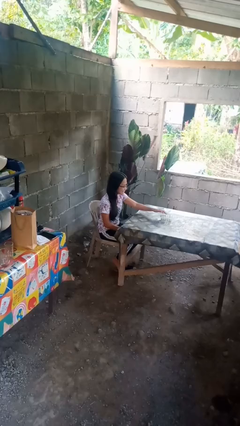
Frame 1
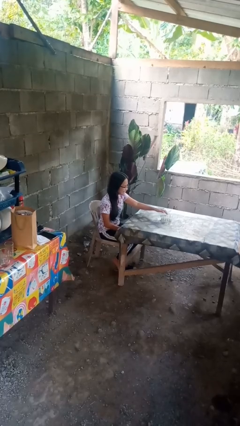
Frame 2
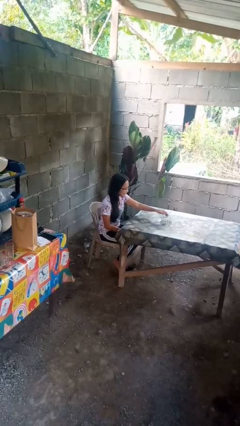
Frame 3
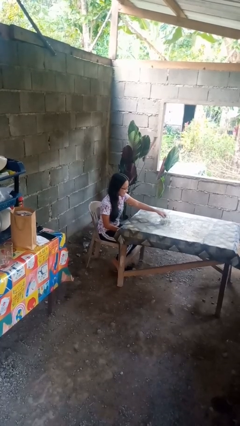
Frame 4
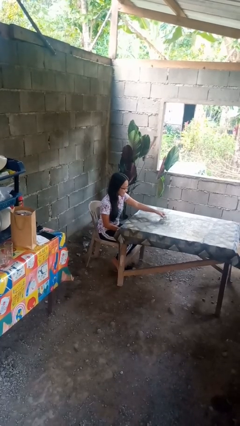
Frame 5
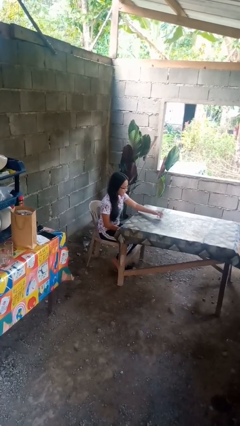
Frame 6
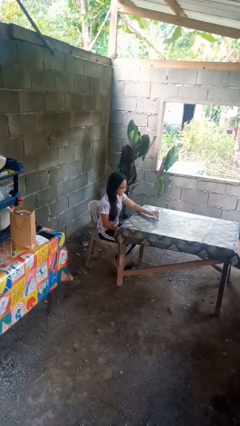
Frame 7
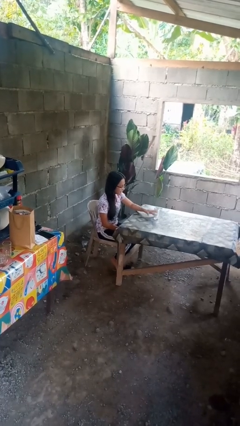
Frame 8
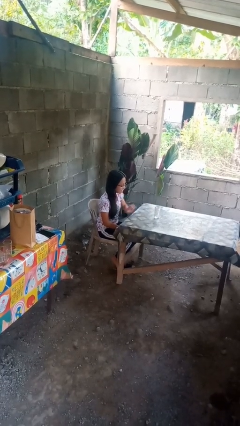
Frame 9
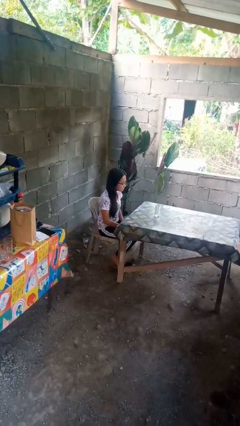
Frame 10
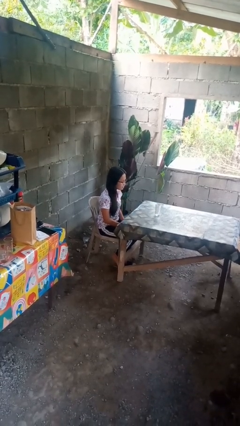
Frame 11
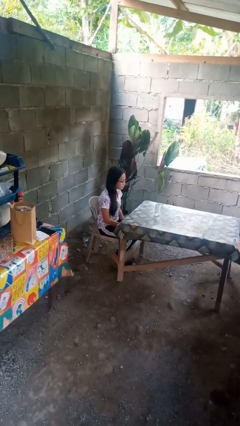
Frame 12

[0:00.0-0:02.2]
person sets upright glass

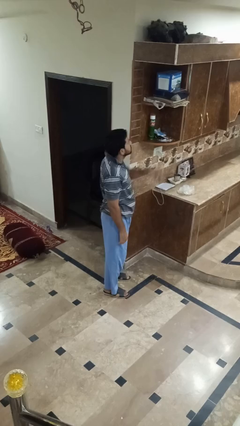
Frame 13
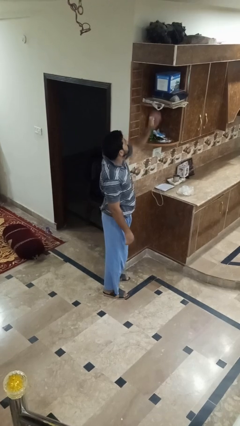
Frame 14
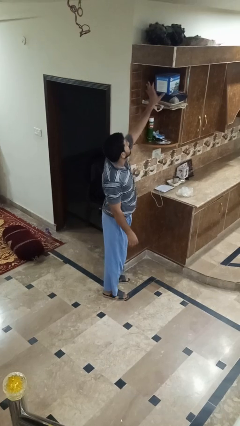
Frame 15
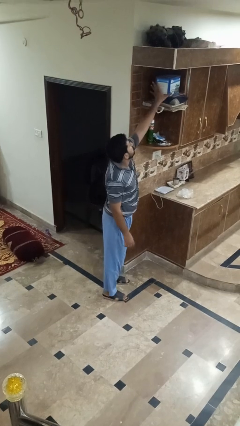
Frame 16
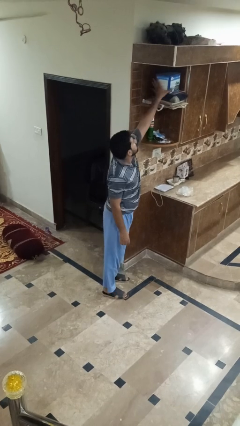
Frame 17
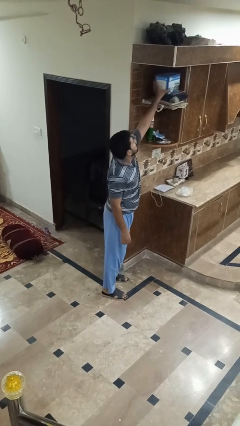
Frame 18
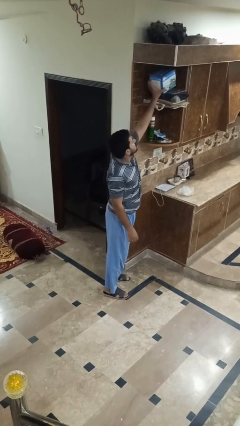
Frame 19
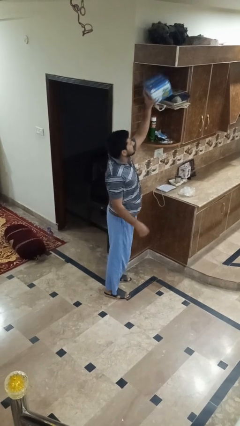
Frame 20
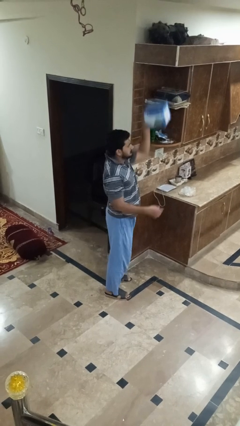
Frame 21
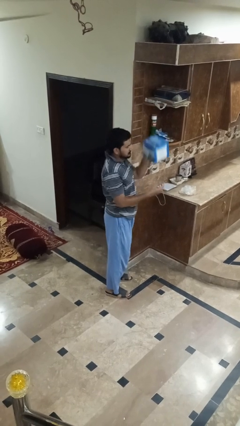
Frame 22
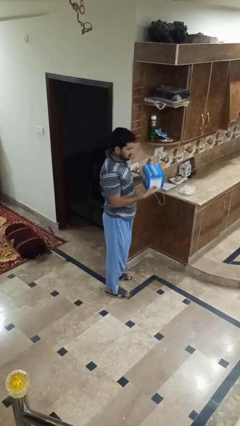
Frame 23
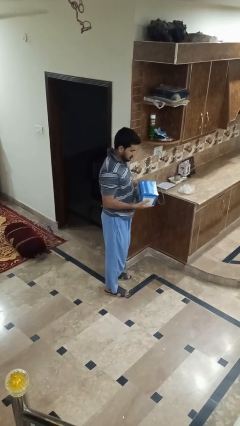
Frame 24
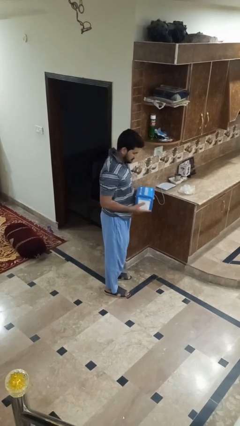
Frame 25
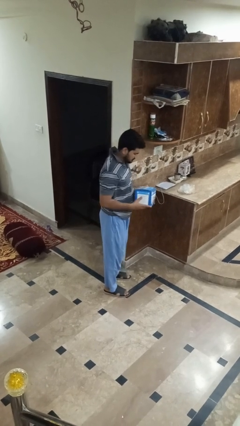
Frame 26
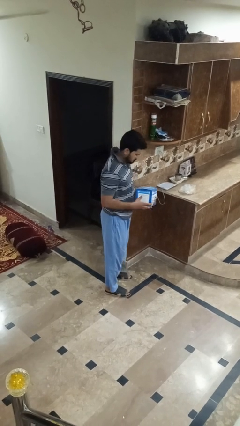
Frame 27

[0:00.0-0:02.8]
person puts down object on shelf

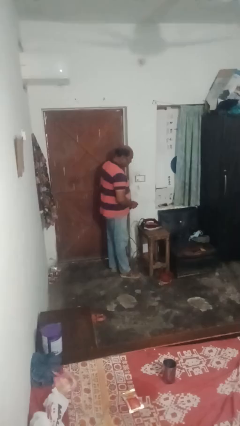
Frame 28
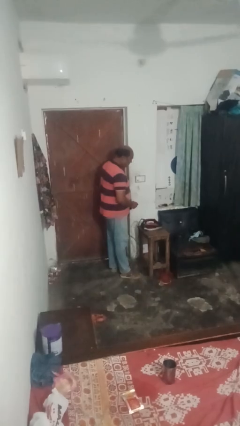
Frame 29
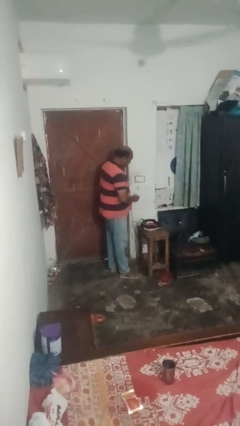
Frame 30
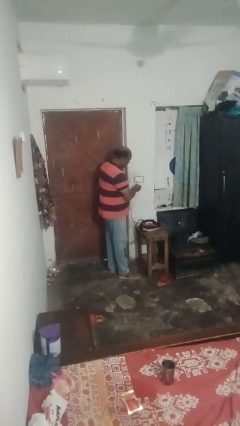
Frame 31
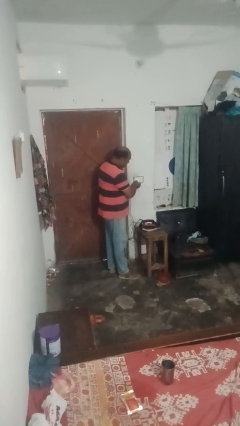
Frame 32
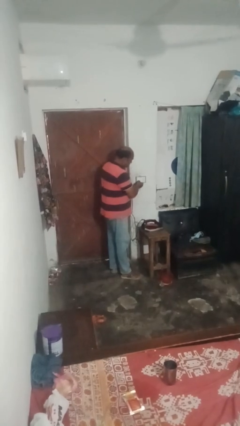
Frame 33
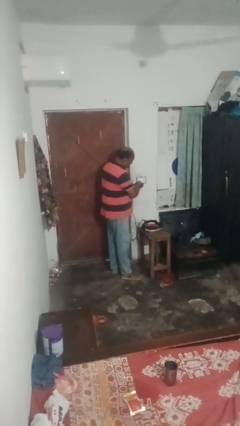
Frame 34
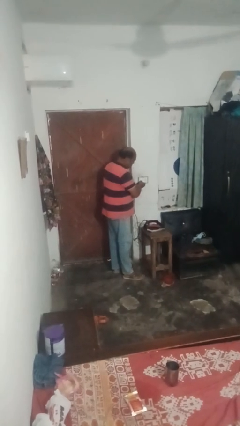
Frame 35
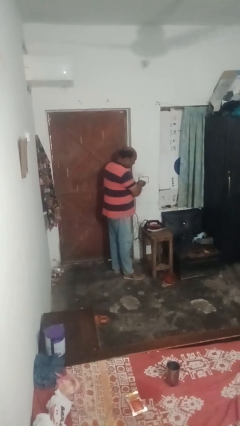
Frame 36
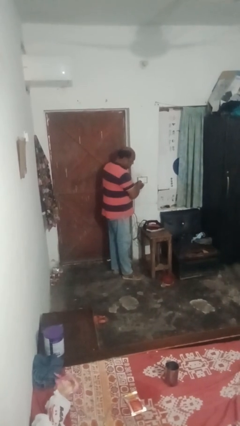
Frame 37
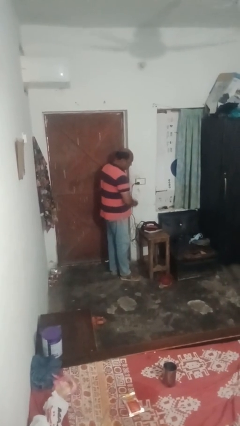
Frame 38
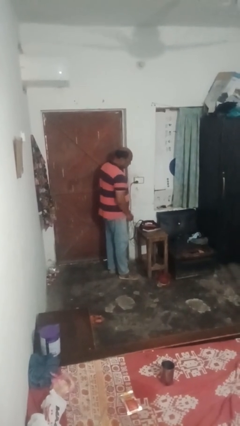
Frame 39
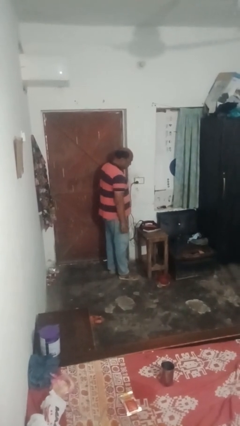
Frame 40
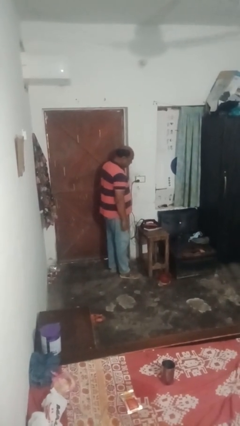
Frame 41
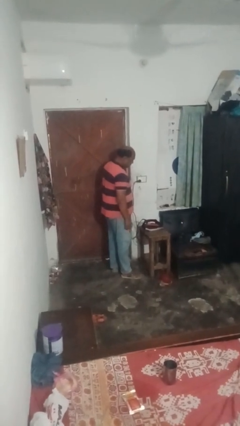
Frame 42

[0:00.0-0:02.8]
person plugs into electrical socket

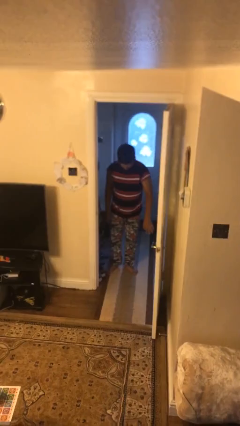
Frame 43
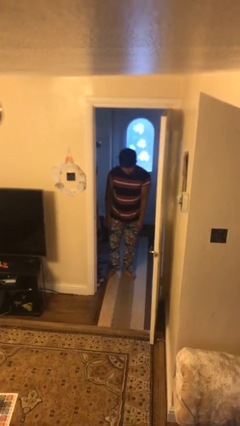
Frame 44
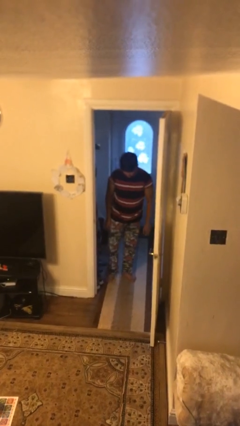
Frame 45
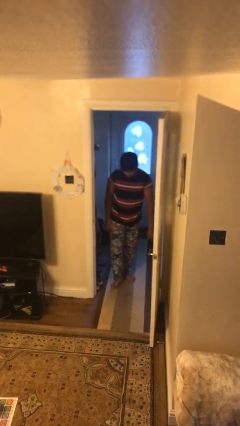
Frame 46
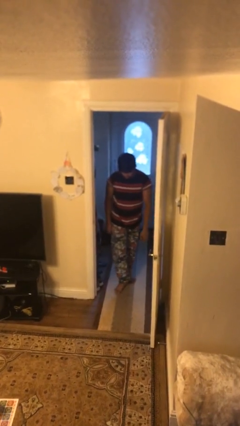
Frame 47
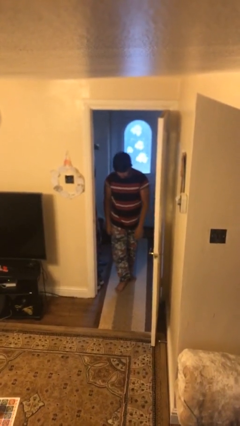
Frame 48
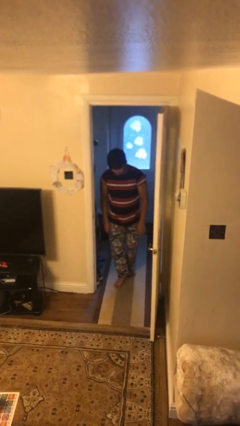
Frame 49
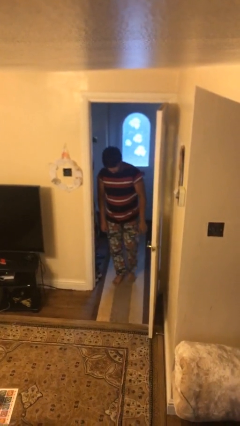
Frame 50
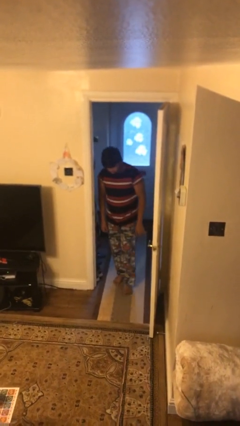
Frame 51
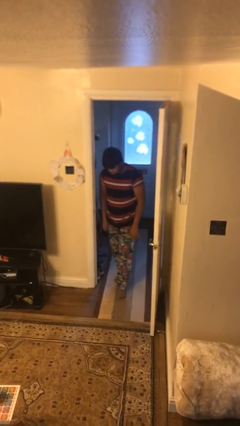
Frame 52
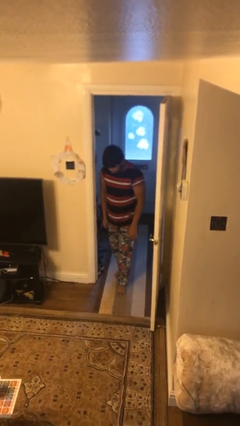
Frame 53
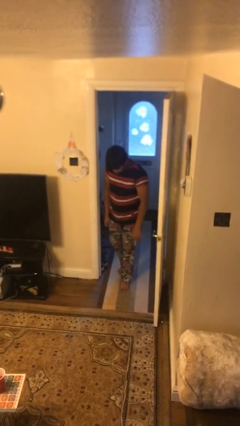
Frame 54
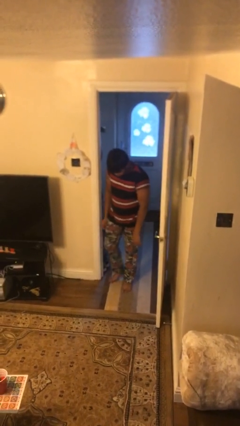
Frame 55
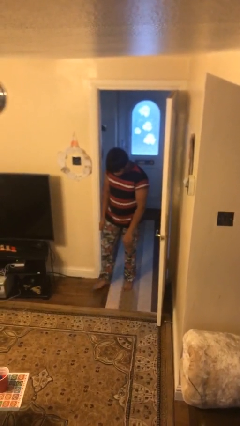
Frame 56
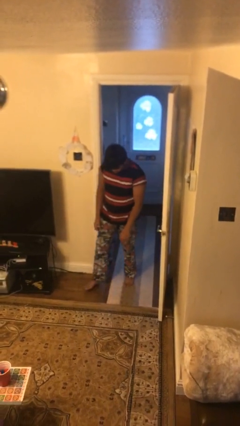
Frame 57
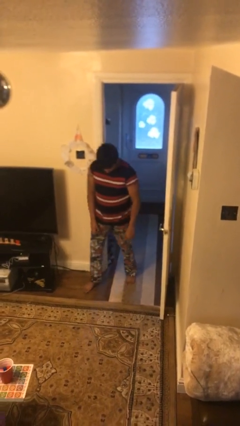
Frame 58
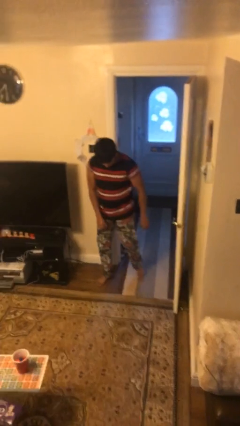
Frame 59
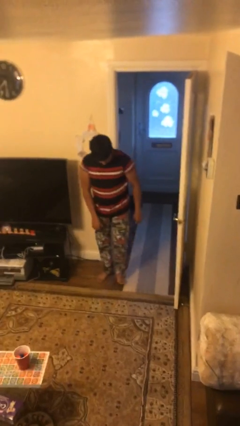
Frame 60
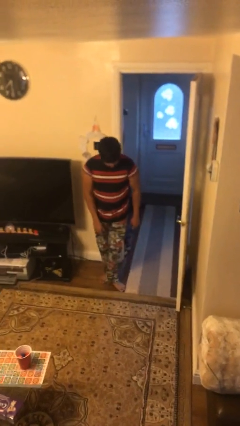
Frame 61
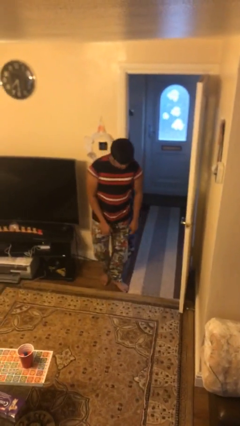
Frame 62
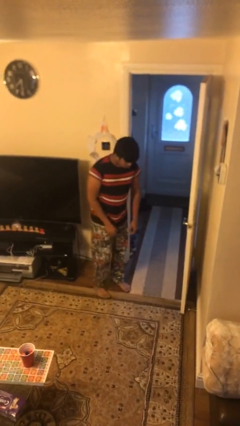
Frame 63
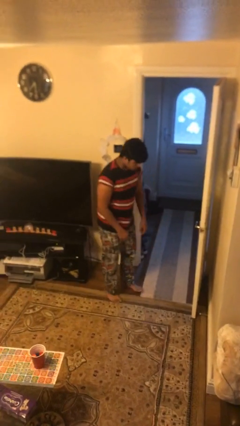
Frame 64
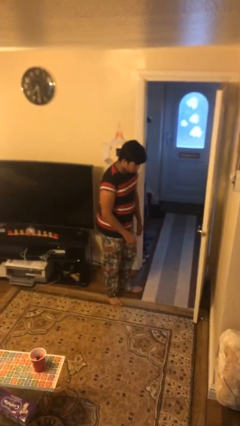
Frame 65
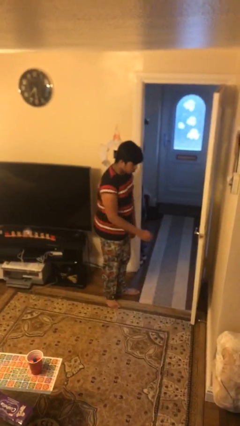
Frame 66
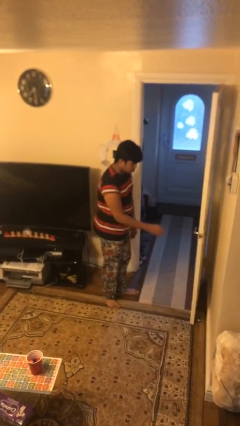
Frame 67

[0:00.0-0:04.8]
person enters scene through structure

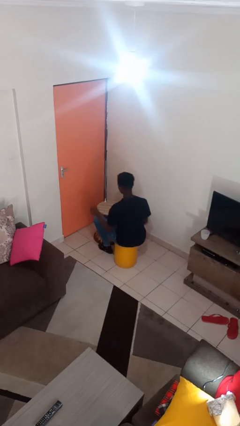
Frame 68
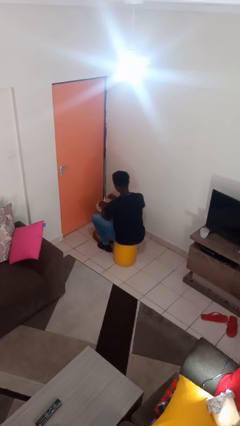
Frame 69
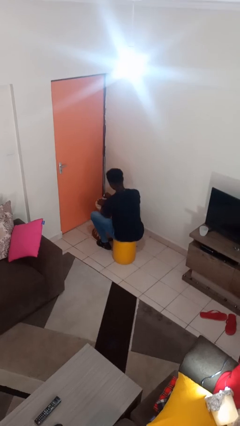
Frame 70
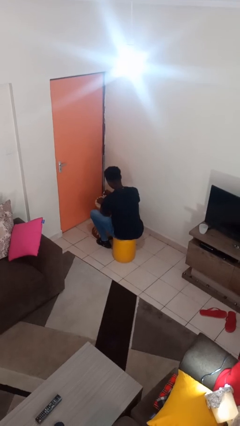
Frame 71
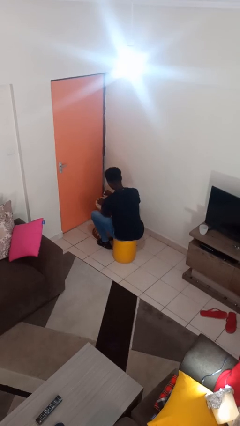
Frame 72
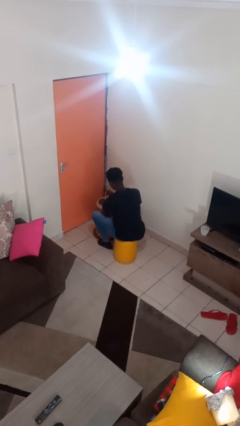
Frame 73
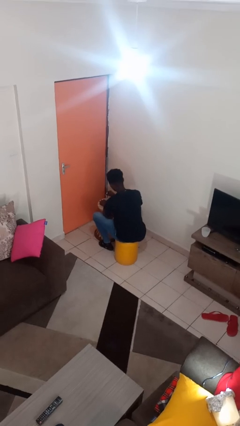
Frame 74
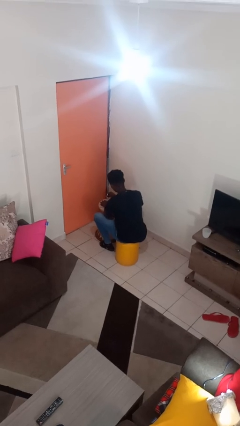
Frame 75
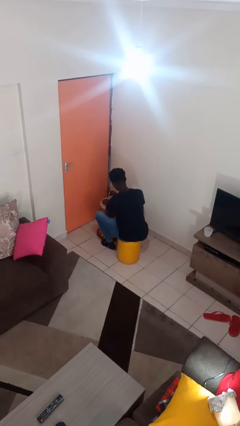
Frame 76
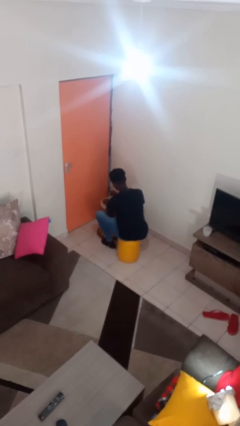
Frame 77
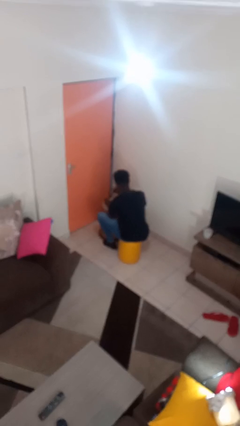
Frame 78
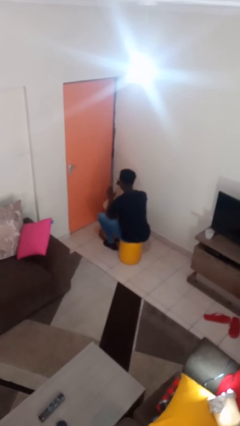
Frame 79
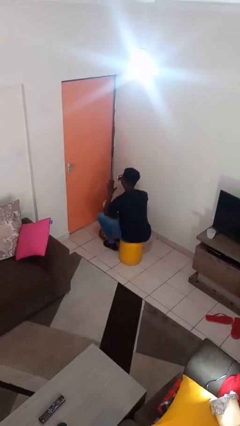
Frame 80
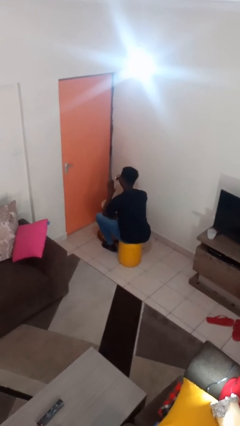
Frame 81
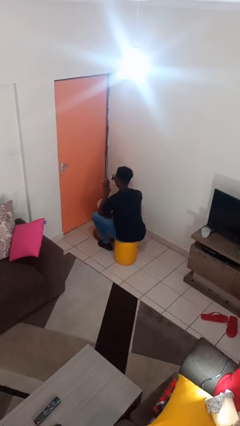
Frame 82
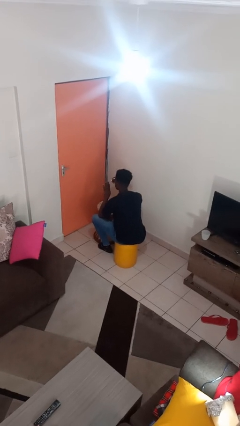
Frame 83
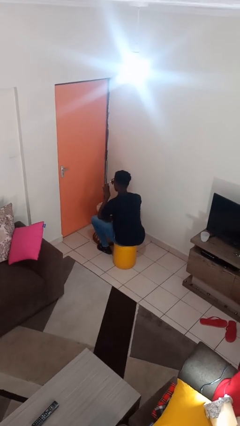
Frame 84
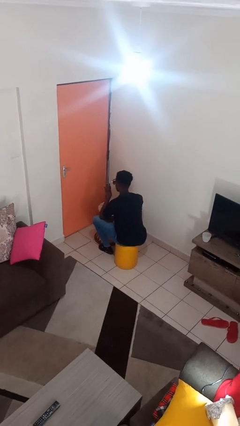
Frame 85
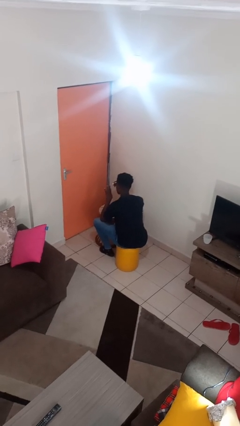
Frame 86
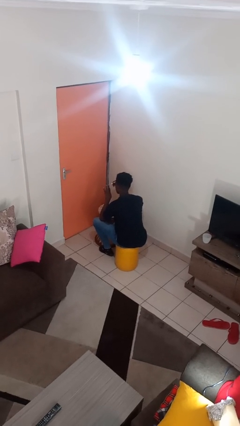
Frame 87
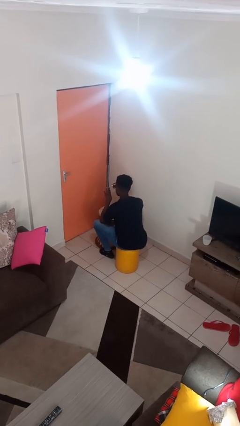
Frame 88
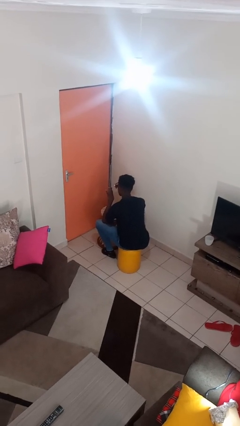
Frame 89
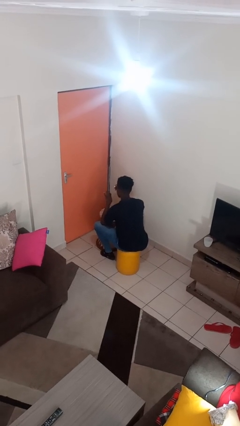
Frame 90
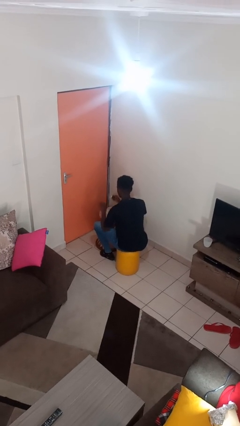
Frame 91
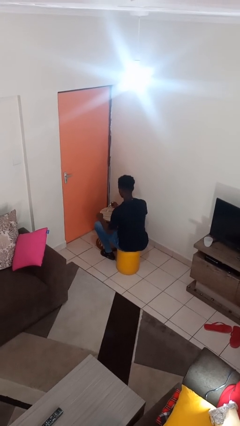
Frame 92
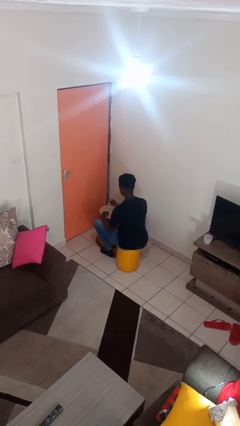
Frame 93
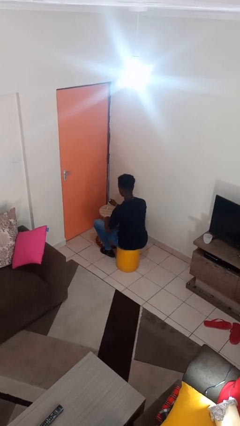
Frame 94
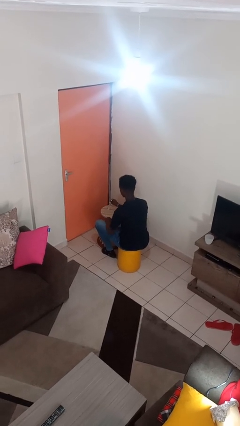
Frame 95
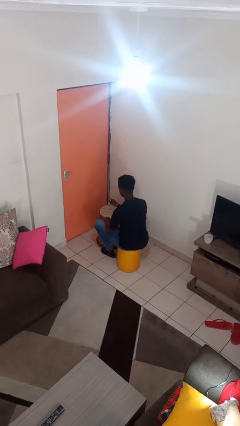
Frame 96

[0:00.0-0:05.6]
person paints fingernails
